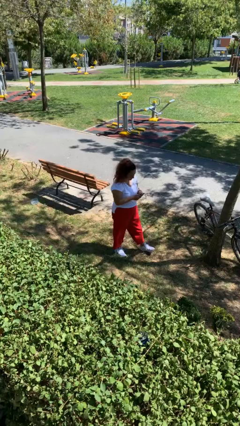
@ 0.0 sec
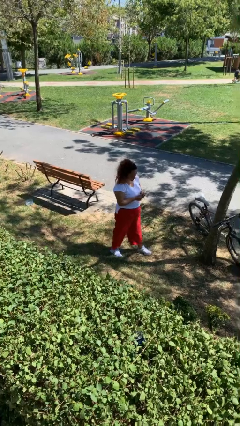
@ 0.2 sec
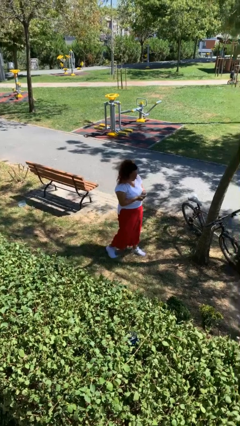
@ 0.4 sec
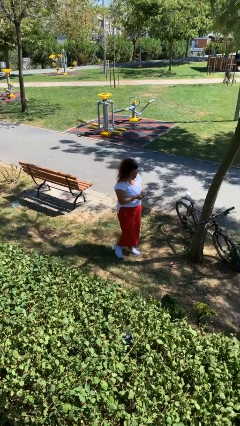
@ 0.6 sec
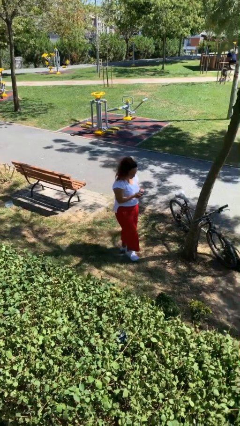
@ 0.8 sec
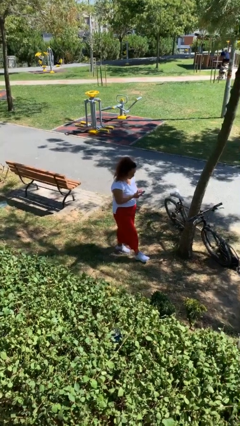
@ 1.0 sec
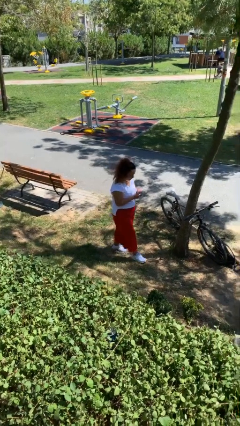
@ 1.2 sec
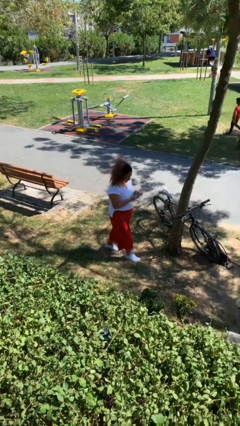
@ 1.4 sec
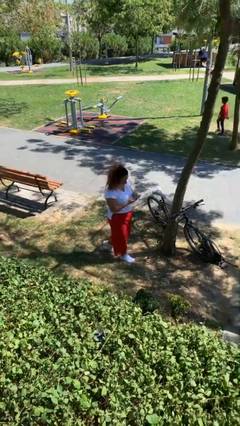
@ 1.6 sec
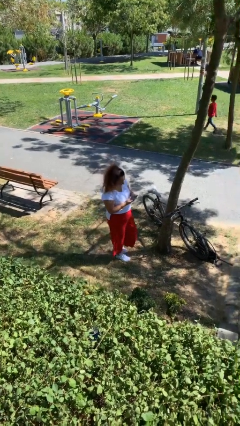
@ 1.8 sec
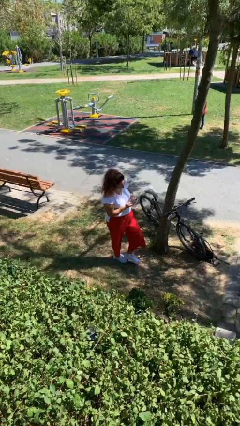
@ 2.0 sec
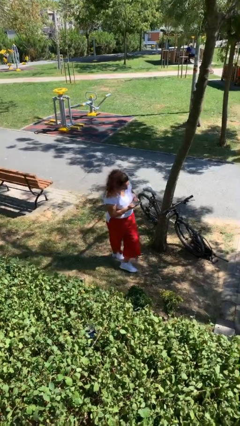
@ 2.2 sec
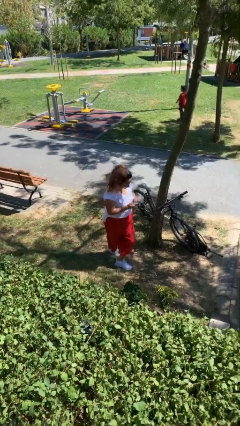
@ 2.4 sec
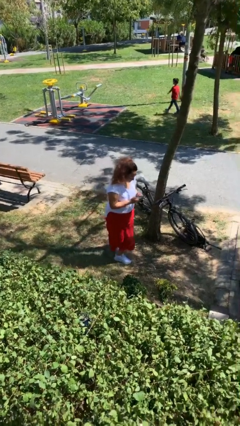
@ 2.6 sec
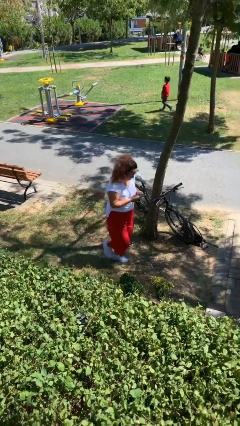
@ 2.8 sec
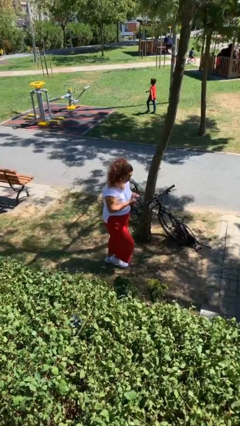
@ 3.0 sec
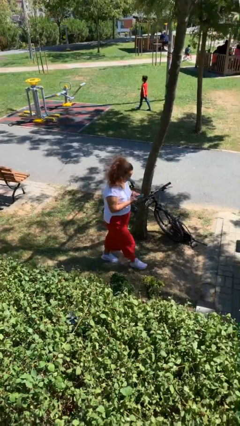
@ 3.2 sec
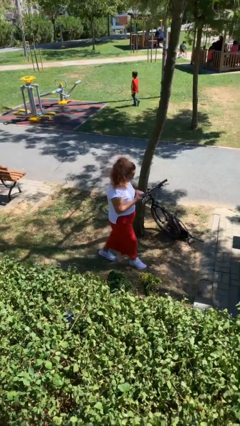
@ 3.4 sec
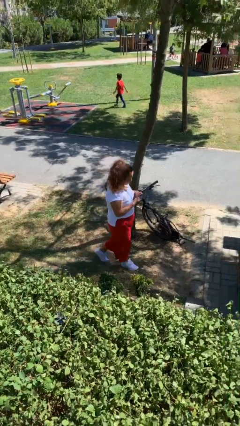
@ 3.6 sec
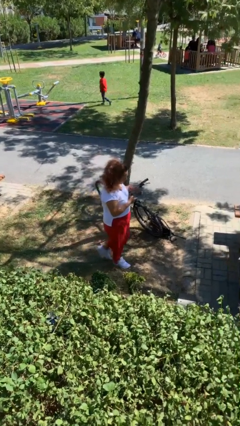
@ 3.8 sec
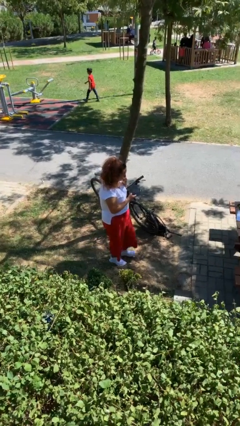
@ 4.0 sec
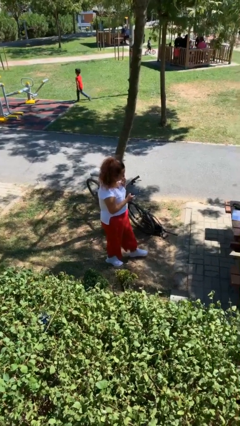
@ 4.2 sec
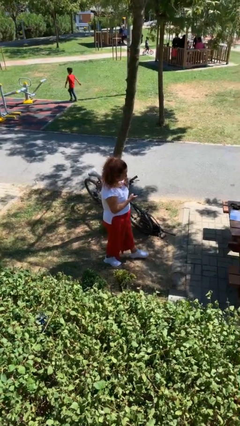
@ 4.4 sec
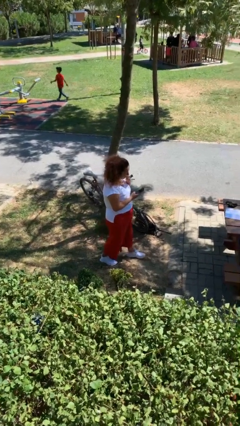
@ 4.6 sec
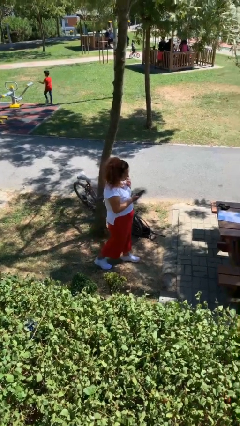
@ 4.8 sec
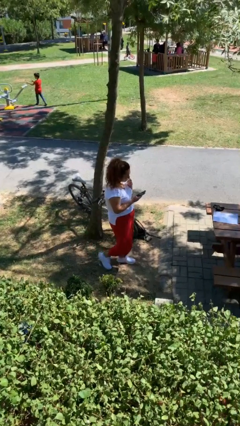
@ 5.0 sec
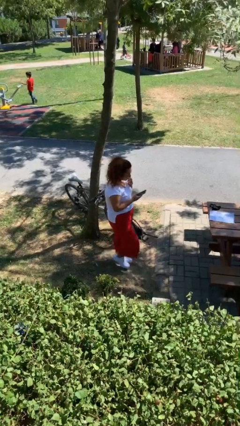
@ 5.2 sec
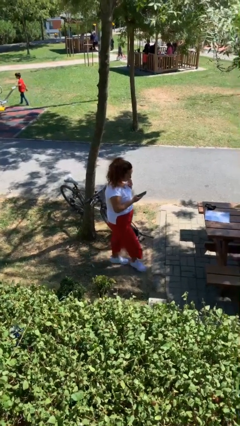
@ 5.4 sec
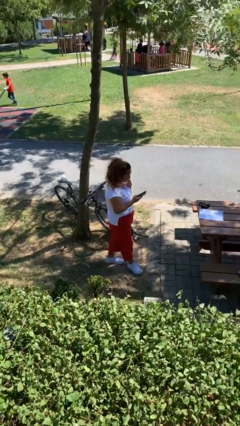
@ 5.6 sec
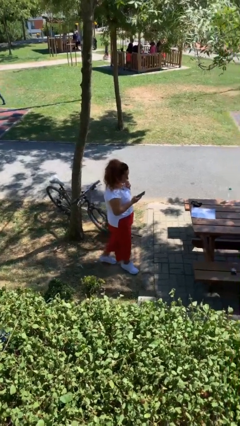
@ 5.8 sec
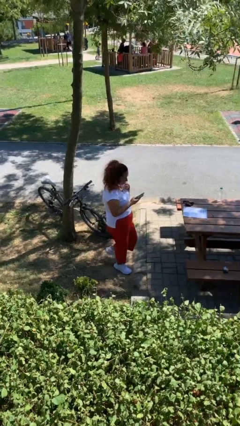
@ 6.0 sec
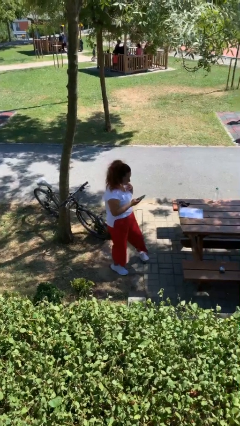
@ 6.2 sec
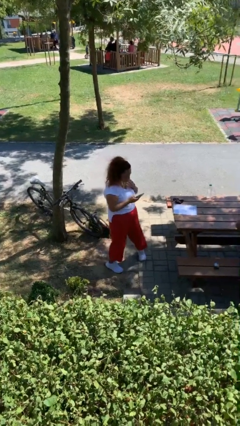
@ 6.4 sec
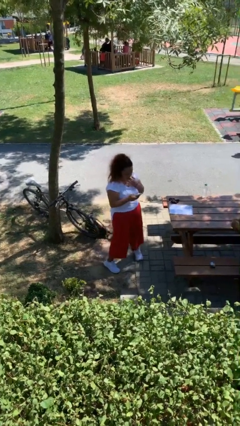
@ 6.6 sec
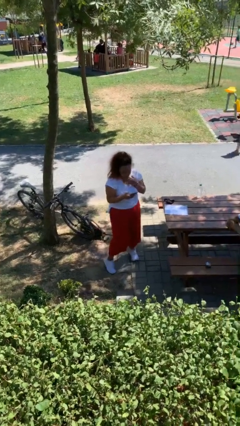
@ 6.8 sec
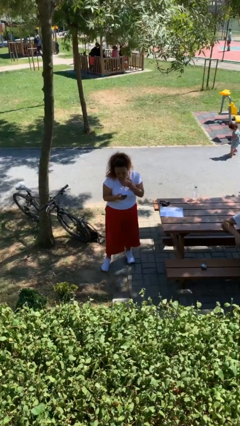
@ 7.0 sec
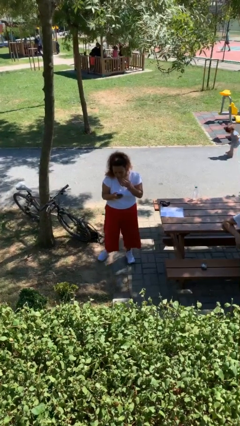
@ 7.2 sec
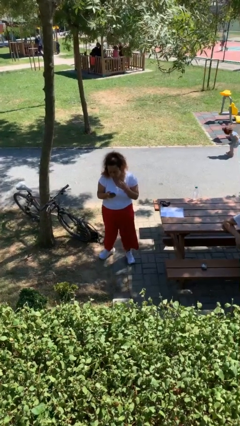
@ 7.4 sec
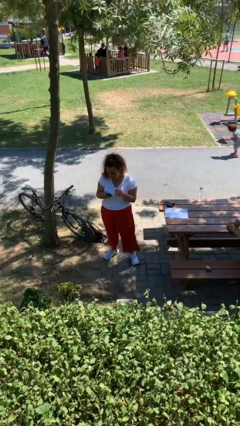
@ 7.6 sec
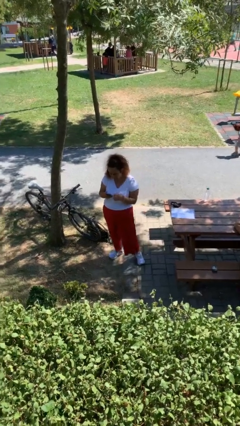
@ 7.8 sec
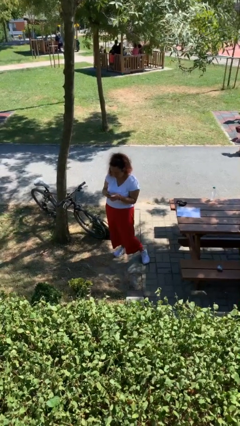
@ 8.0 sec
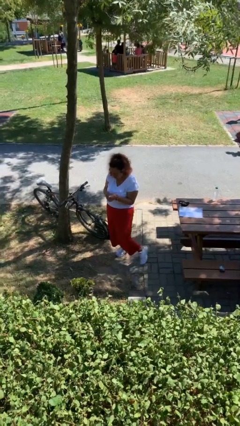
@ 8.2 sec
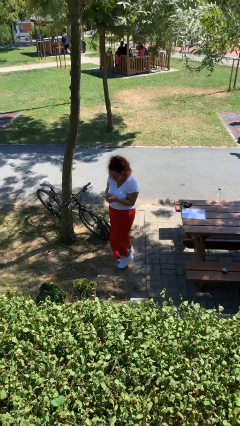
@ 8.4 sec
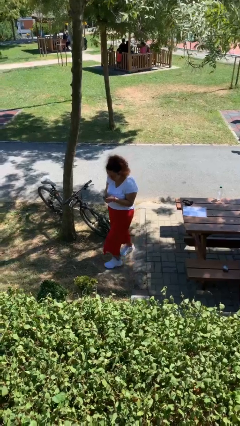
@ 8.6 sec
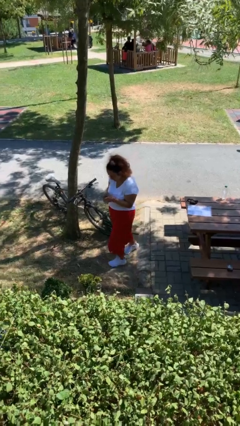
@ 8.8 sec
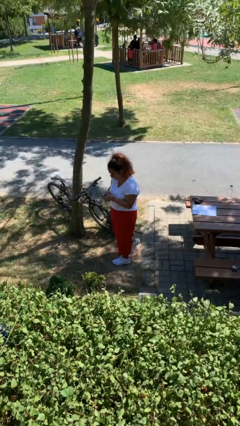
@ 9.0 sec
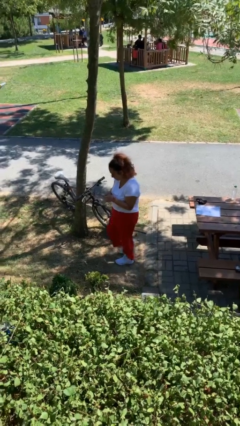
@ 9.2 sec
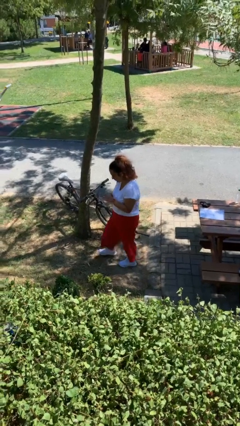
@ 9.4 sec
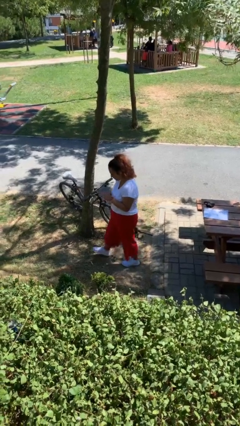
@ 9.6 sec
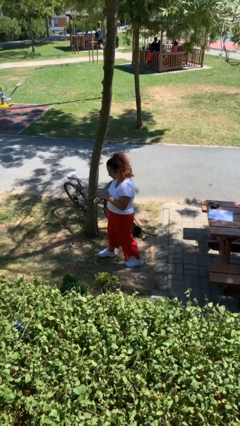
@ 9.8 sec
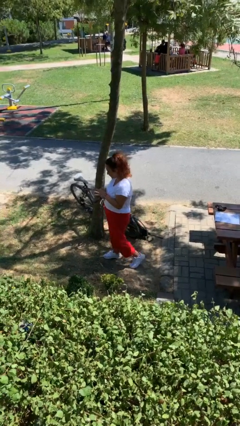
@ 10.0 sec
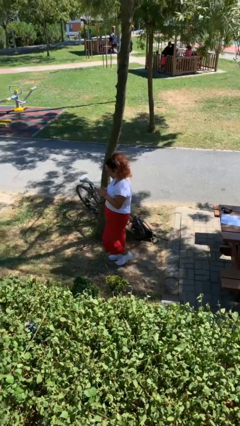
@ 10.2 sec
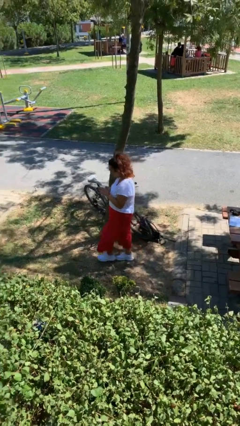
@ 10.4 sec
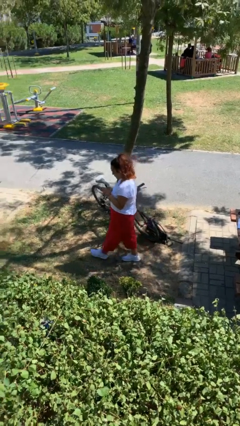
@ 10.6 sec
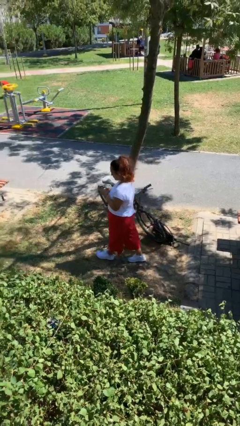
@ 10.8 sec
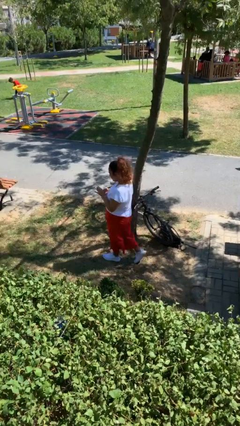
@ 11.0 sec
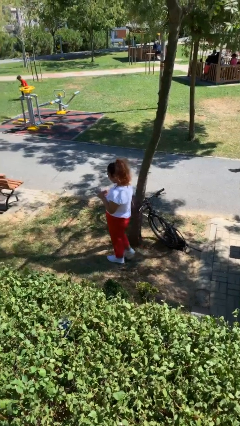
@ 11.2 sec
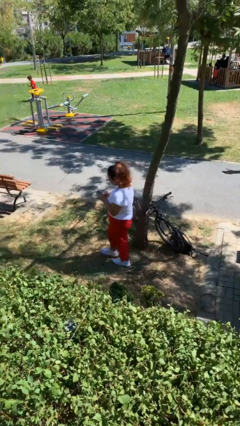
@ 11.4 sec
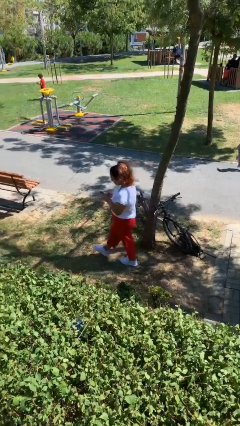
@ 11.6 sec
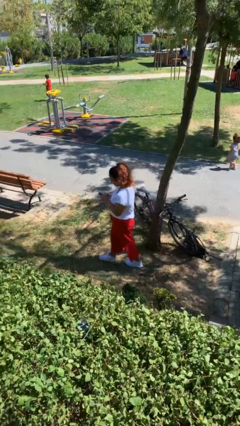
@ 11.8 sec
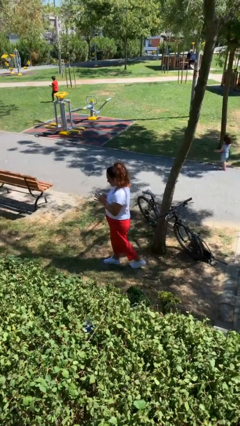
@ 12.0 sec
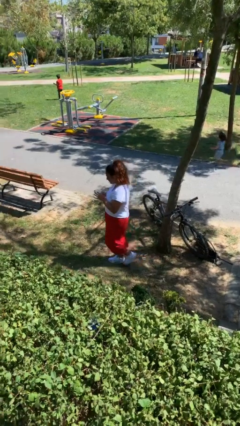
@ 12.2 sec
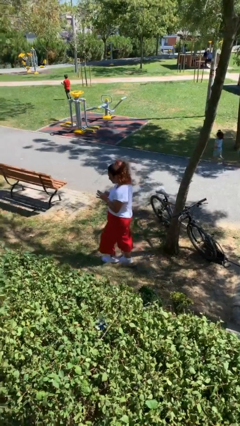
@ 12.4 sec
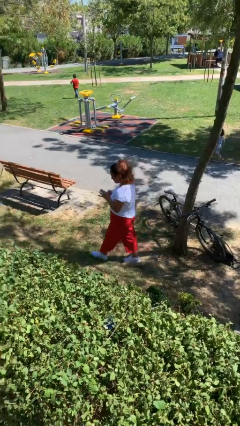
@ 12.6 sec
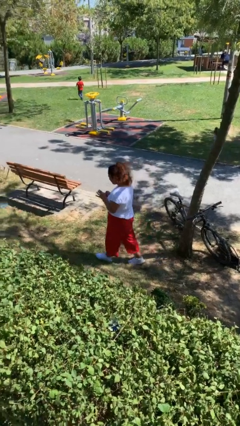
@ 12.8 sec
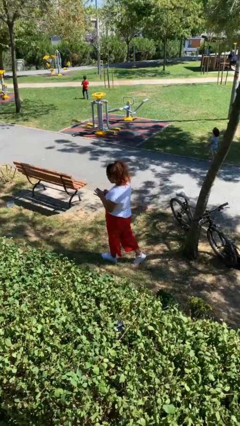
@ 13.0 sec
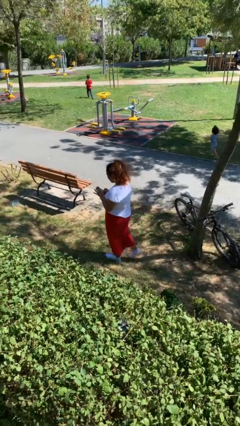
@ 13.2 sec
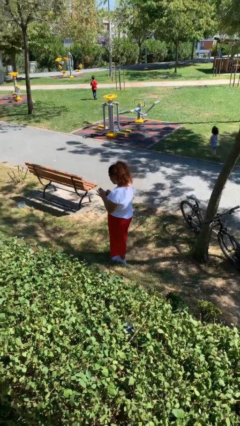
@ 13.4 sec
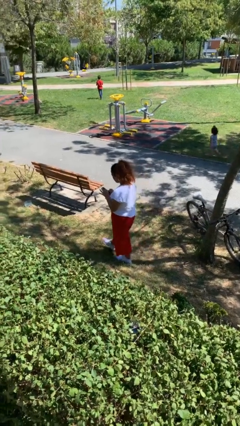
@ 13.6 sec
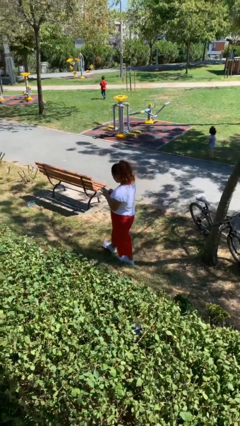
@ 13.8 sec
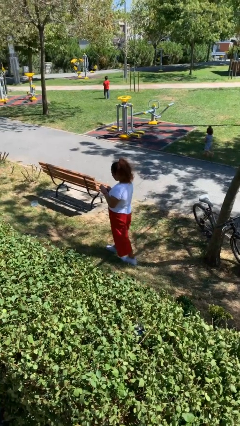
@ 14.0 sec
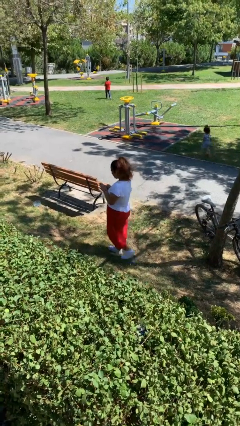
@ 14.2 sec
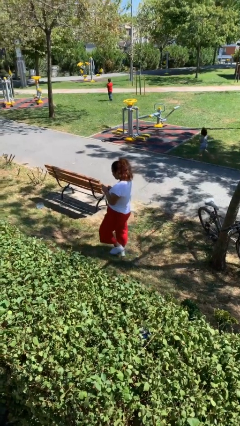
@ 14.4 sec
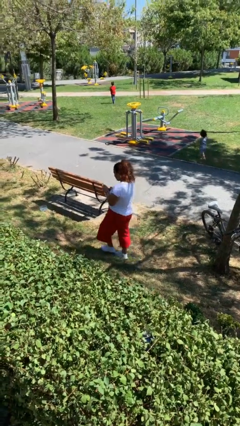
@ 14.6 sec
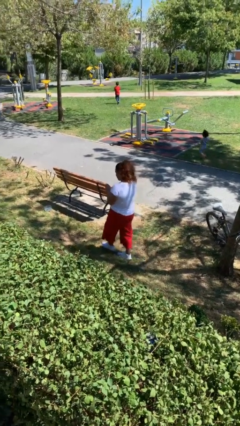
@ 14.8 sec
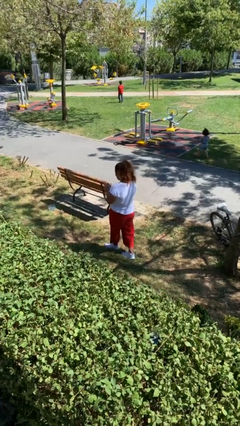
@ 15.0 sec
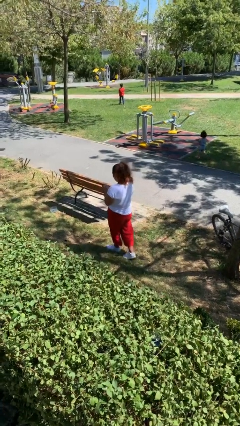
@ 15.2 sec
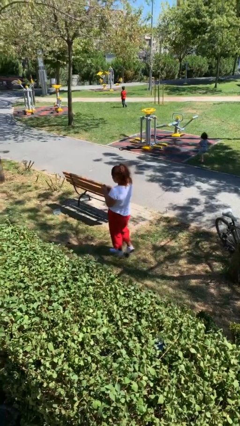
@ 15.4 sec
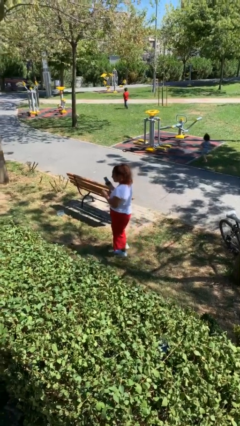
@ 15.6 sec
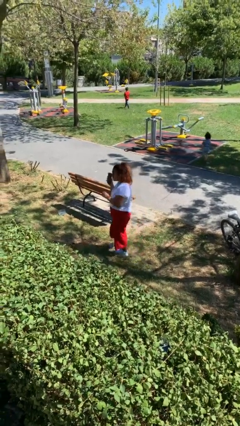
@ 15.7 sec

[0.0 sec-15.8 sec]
person texts on phone

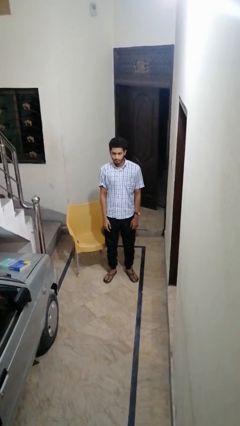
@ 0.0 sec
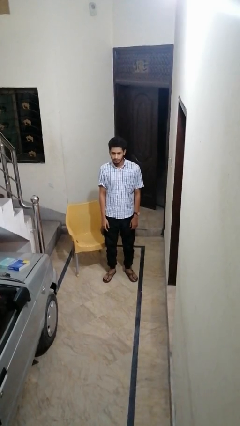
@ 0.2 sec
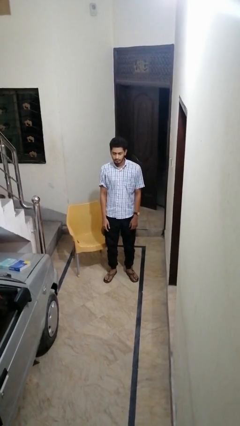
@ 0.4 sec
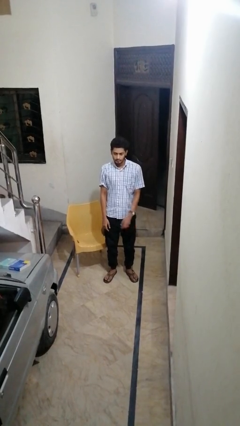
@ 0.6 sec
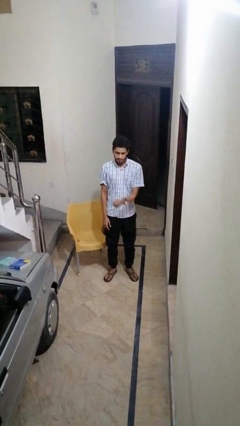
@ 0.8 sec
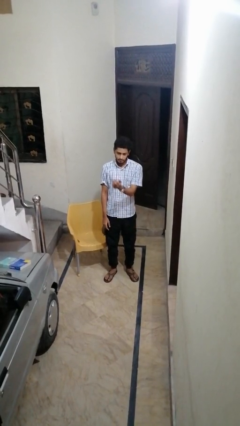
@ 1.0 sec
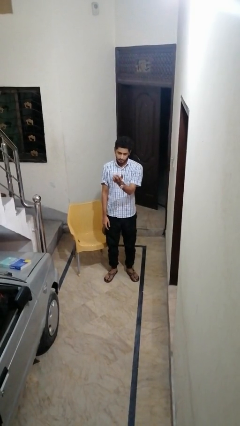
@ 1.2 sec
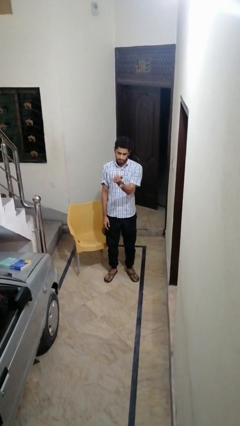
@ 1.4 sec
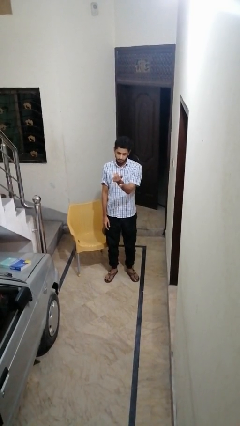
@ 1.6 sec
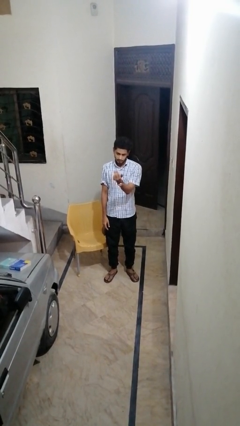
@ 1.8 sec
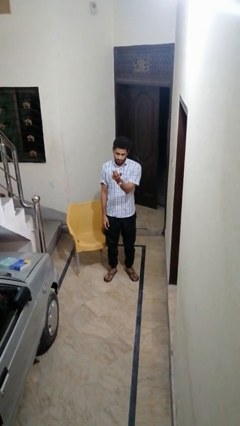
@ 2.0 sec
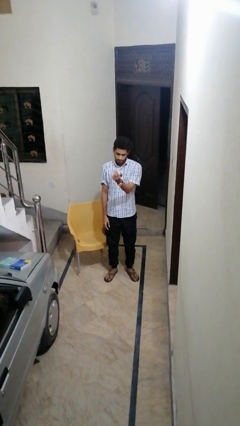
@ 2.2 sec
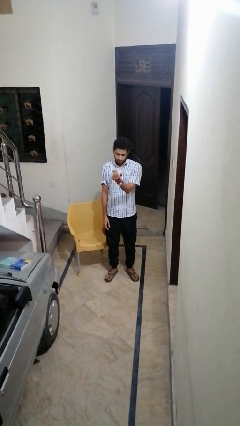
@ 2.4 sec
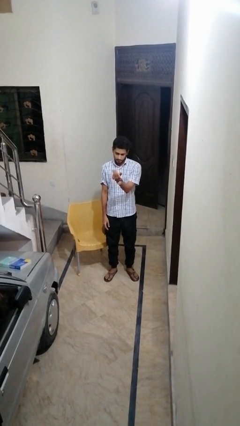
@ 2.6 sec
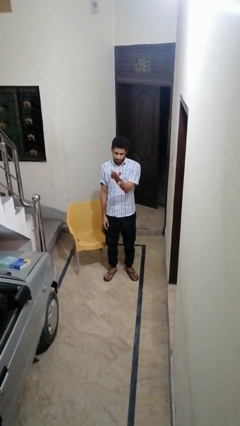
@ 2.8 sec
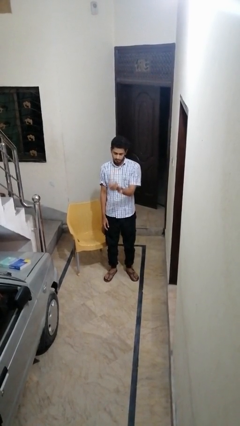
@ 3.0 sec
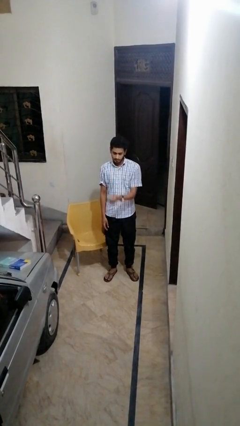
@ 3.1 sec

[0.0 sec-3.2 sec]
person gestures come here
